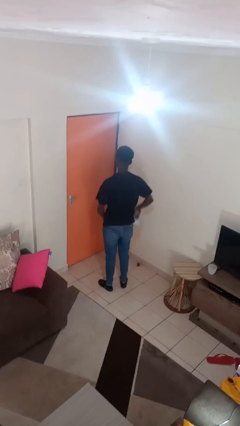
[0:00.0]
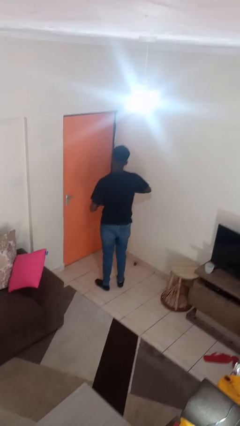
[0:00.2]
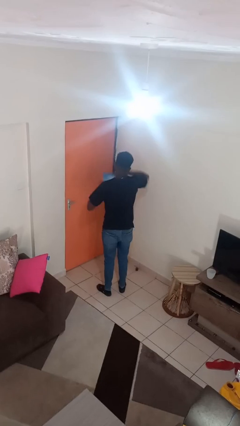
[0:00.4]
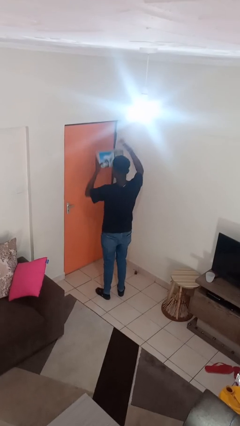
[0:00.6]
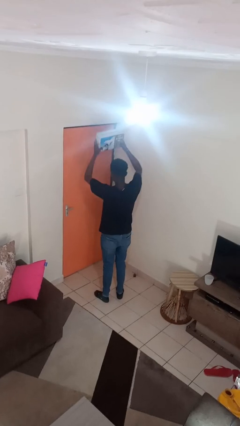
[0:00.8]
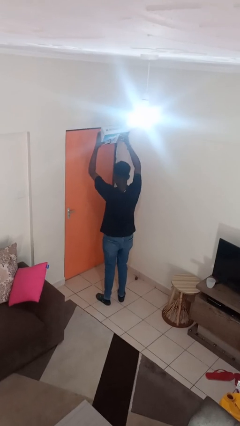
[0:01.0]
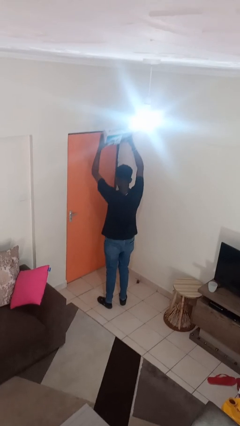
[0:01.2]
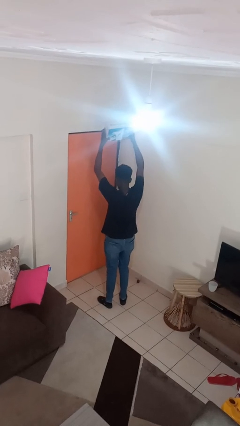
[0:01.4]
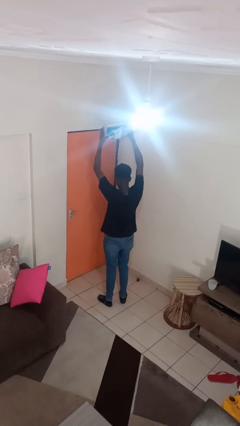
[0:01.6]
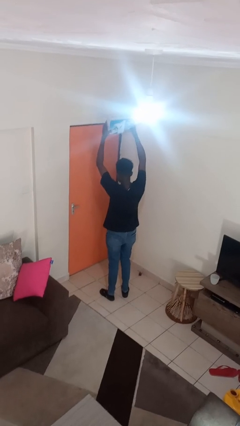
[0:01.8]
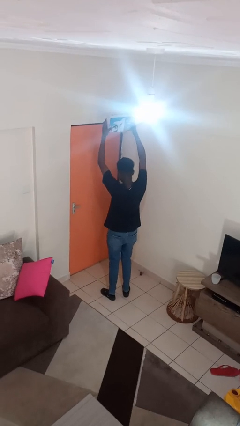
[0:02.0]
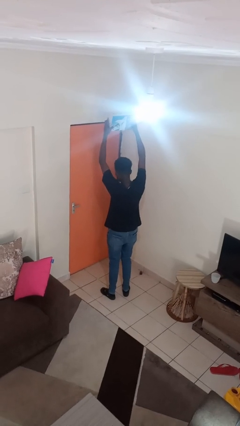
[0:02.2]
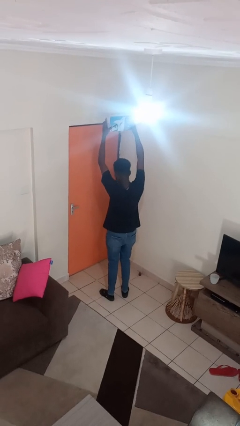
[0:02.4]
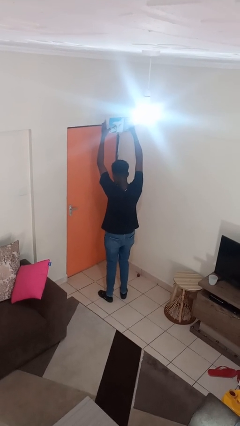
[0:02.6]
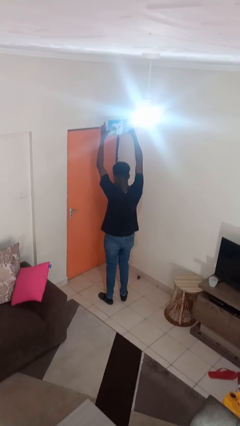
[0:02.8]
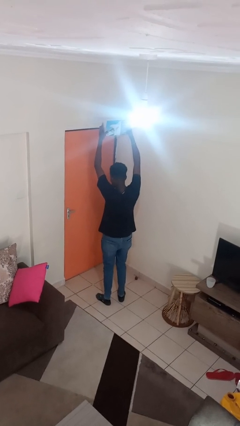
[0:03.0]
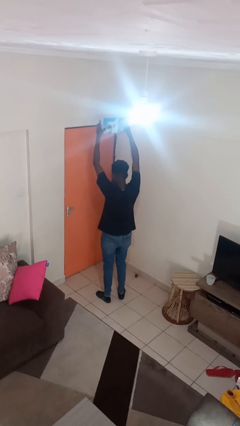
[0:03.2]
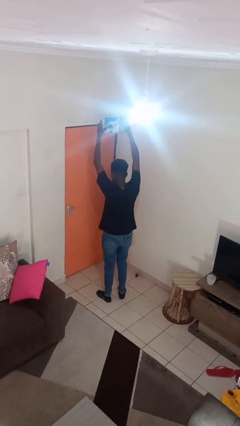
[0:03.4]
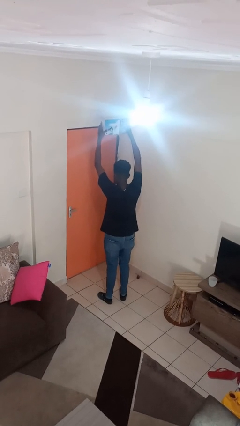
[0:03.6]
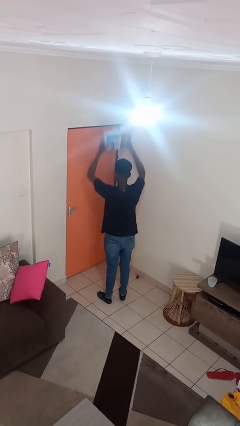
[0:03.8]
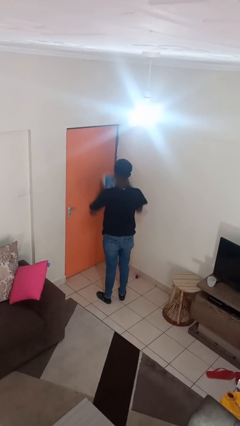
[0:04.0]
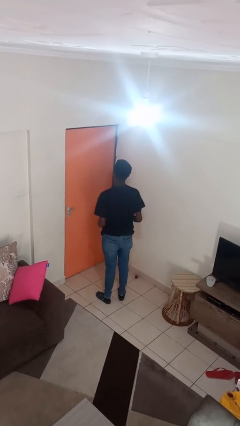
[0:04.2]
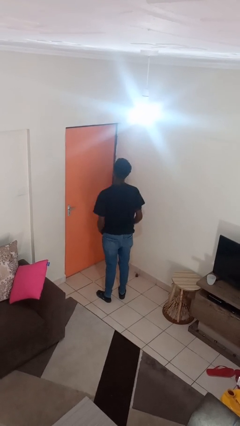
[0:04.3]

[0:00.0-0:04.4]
person holds object above head

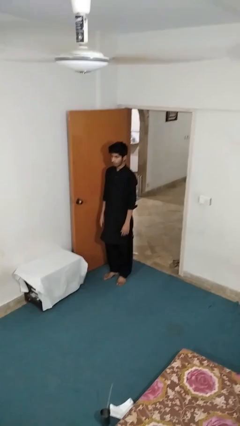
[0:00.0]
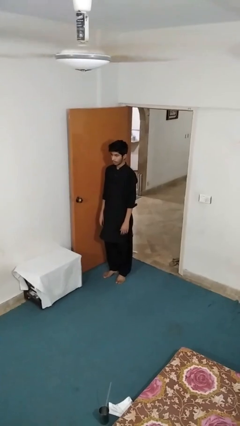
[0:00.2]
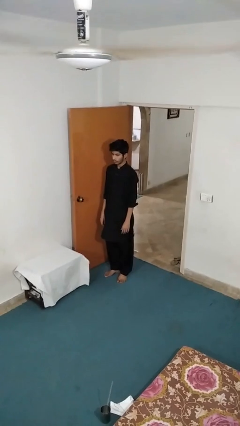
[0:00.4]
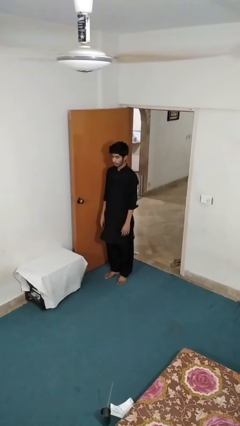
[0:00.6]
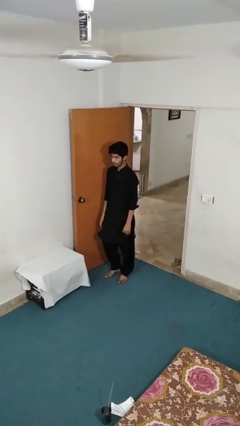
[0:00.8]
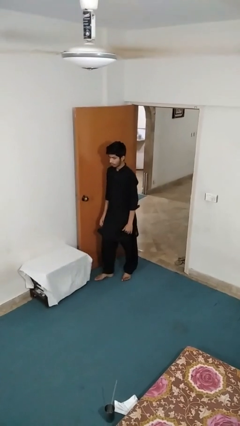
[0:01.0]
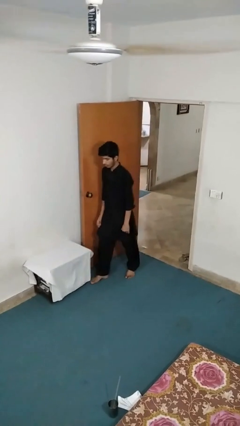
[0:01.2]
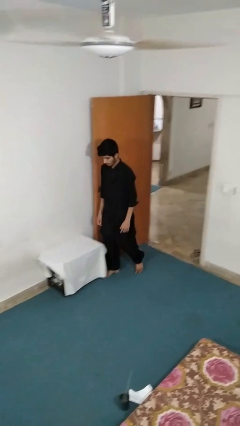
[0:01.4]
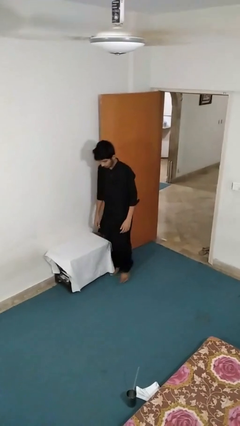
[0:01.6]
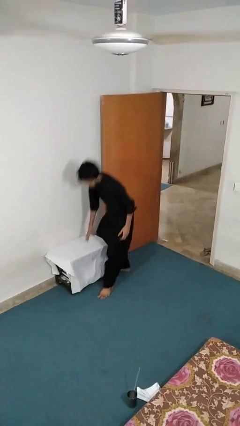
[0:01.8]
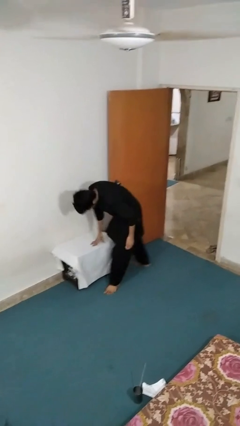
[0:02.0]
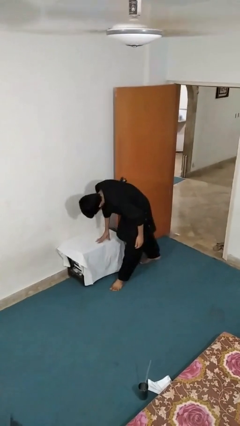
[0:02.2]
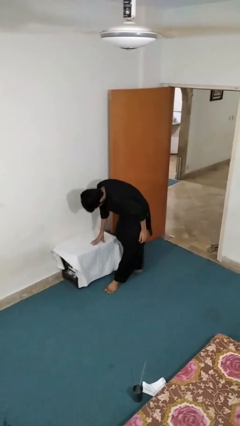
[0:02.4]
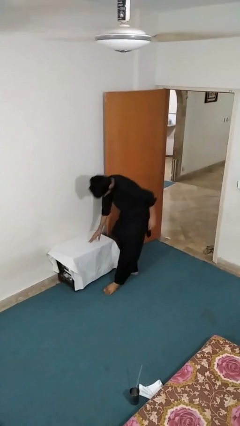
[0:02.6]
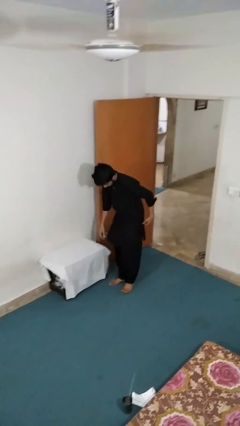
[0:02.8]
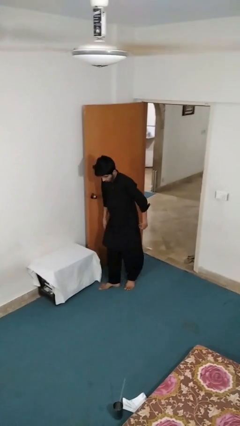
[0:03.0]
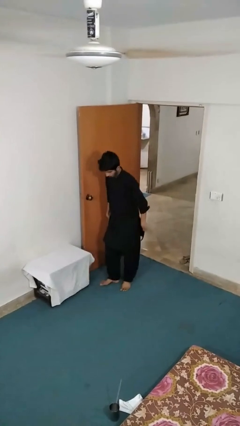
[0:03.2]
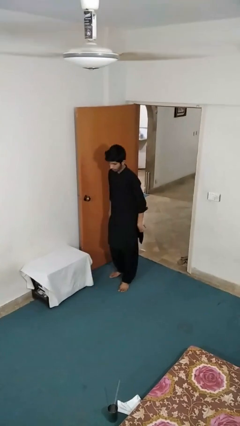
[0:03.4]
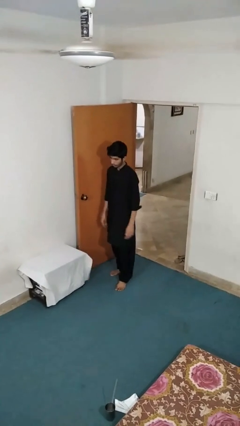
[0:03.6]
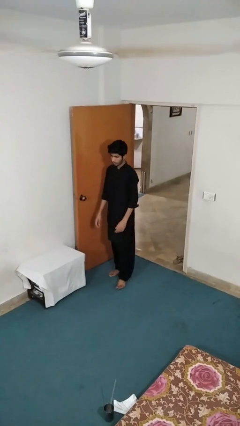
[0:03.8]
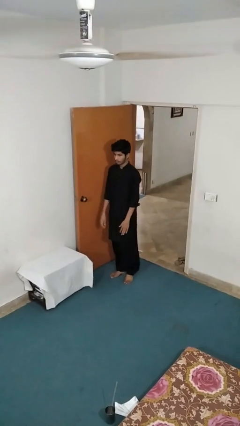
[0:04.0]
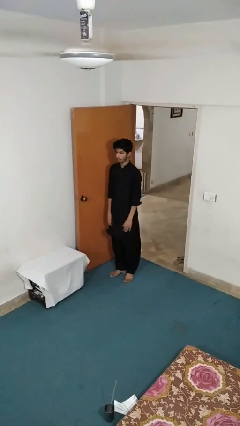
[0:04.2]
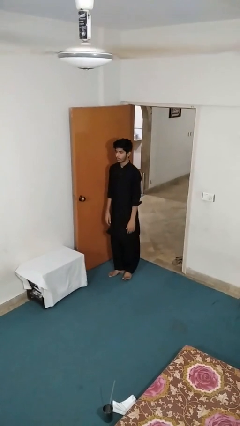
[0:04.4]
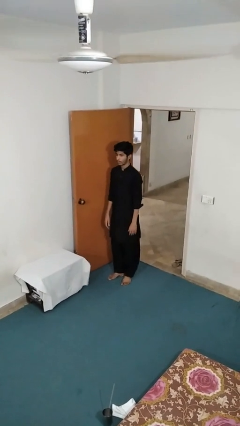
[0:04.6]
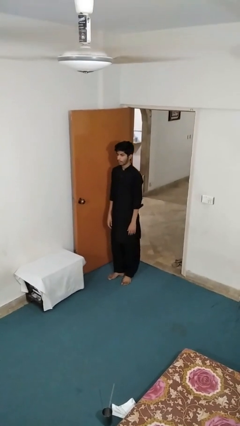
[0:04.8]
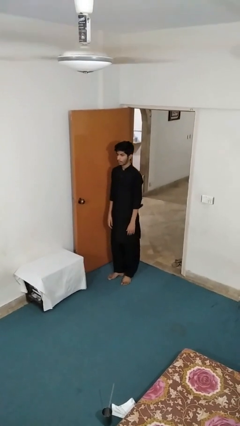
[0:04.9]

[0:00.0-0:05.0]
person bumps into table

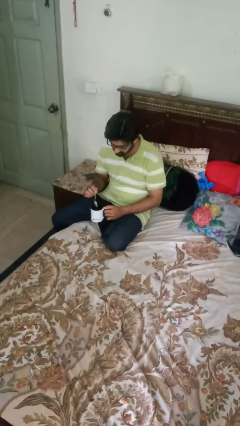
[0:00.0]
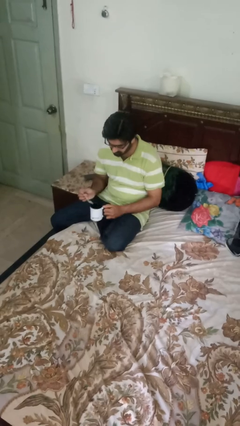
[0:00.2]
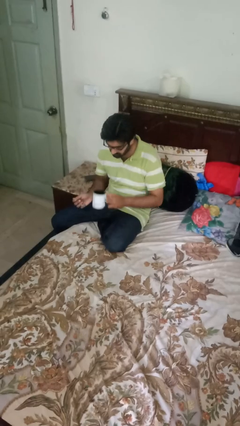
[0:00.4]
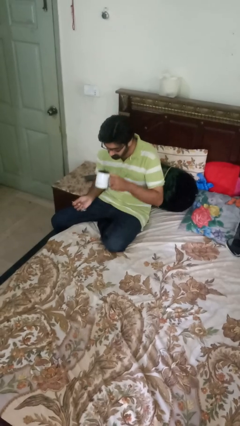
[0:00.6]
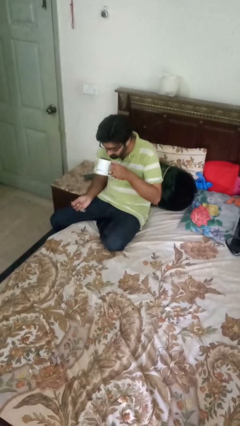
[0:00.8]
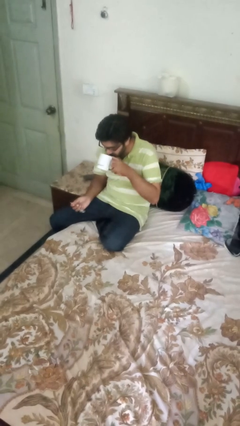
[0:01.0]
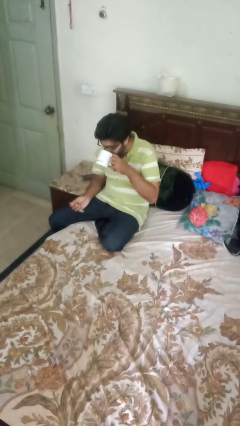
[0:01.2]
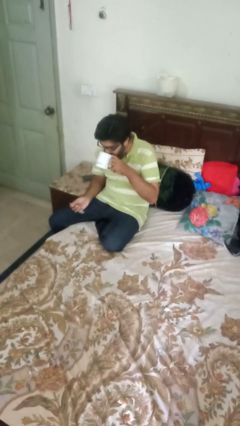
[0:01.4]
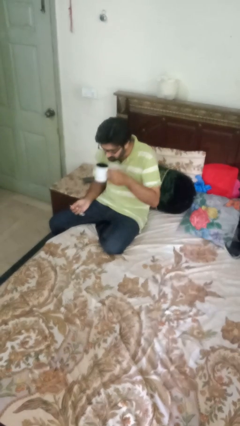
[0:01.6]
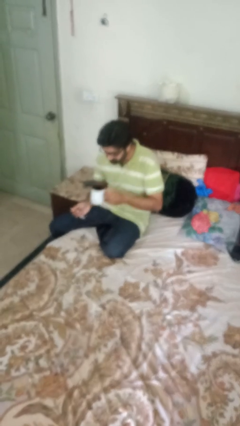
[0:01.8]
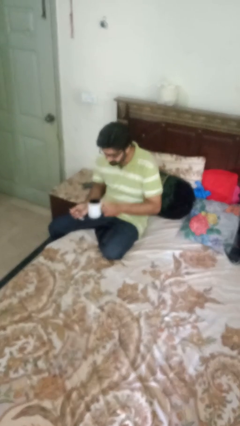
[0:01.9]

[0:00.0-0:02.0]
person drinks from mug

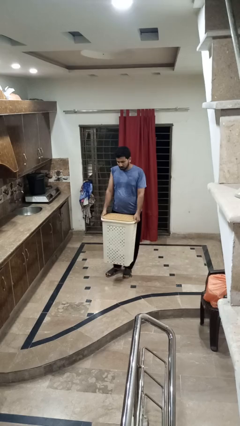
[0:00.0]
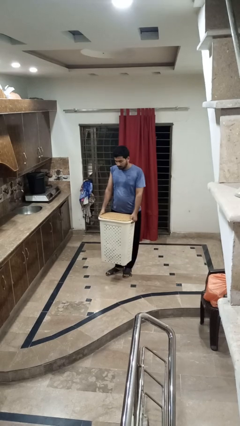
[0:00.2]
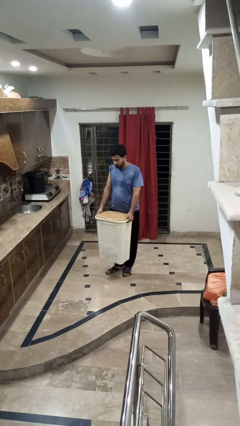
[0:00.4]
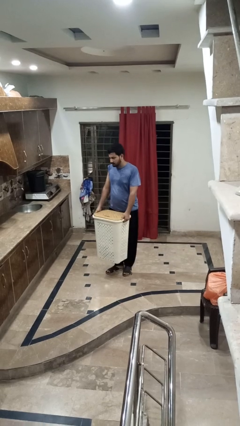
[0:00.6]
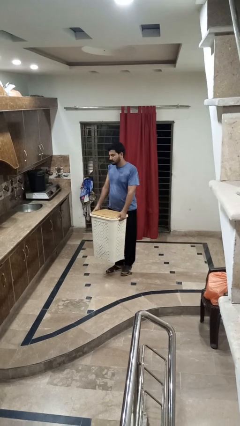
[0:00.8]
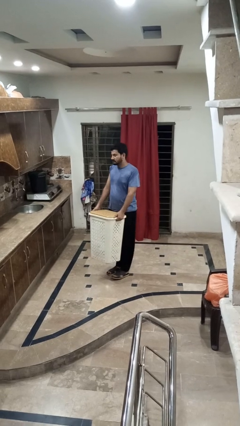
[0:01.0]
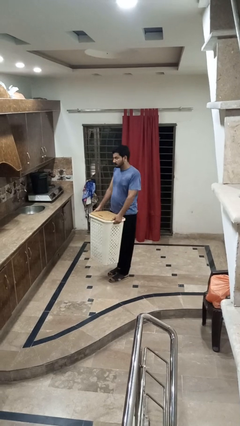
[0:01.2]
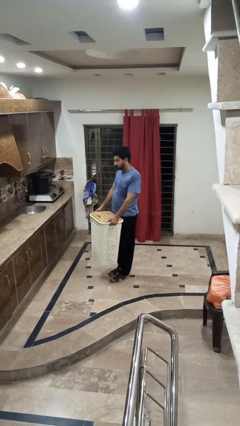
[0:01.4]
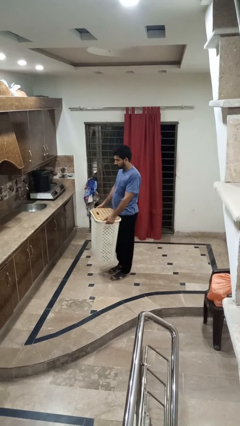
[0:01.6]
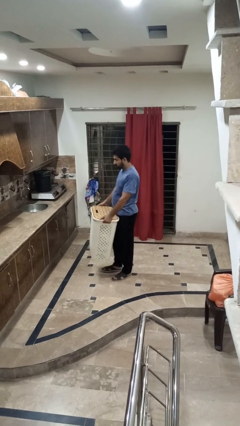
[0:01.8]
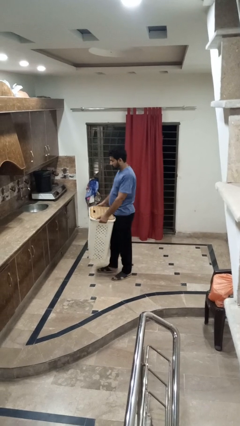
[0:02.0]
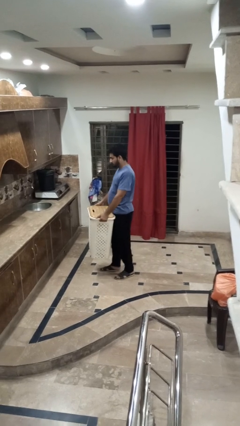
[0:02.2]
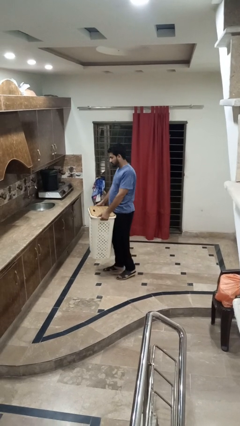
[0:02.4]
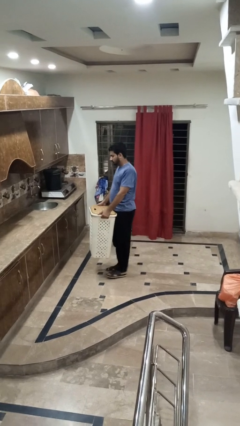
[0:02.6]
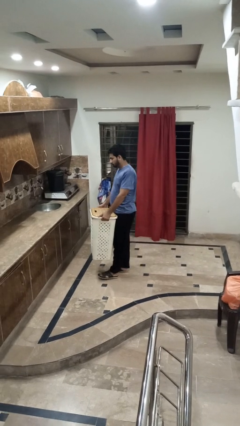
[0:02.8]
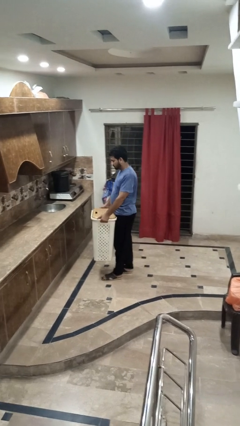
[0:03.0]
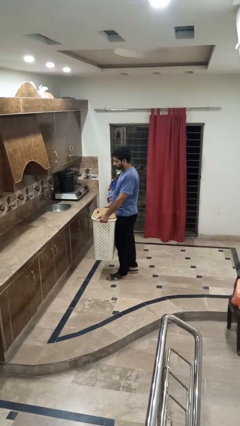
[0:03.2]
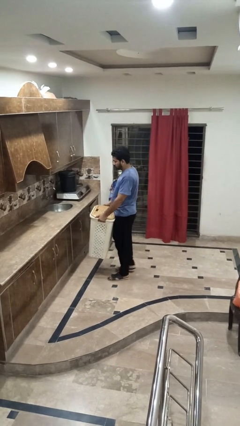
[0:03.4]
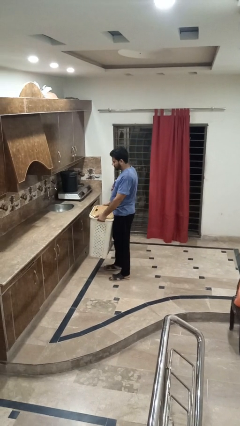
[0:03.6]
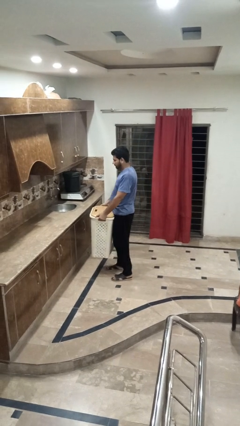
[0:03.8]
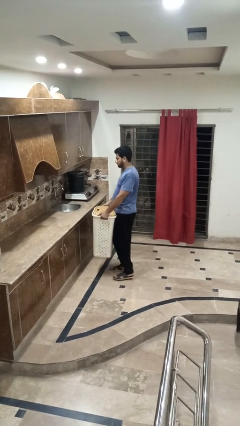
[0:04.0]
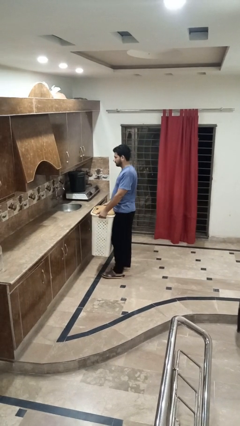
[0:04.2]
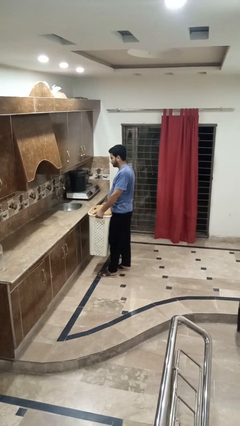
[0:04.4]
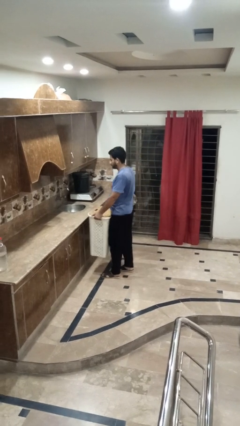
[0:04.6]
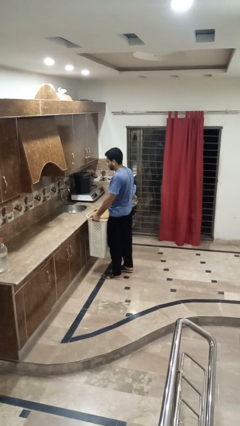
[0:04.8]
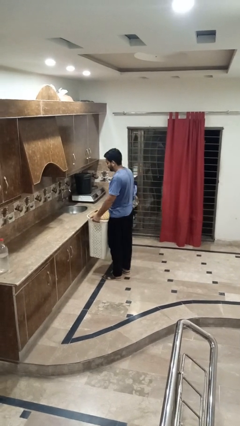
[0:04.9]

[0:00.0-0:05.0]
person carries laundry basket

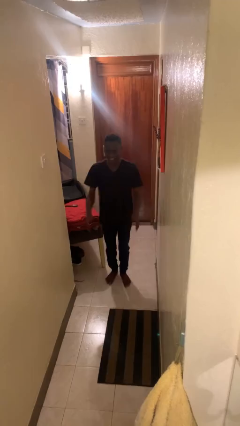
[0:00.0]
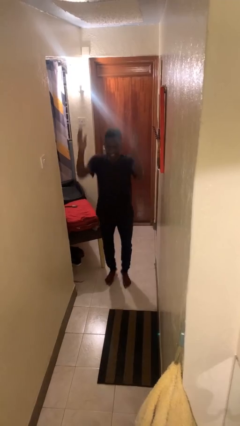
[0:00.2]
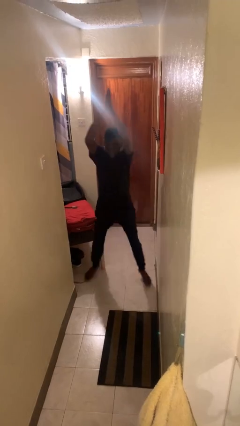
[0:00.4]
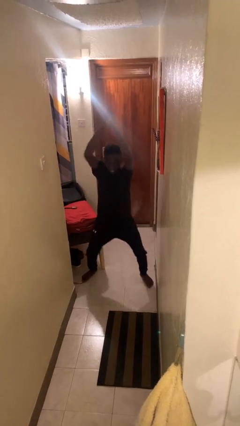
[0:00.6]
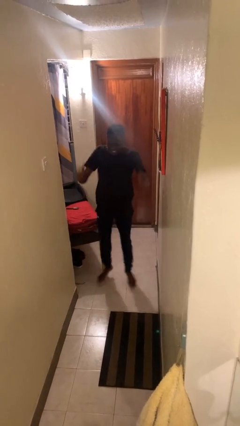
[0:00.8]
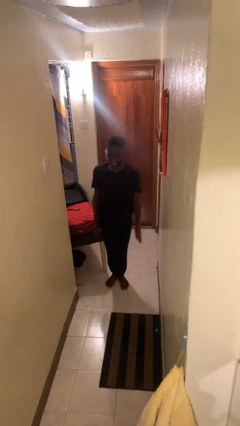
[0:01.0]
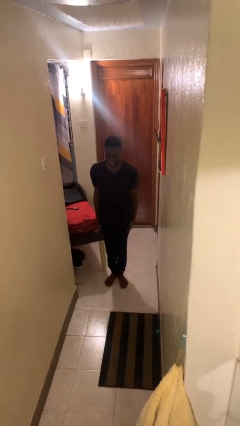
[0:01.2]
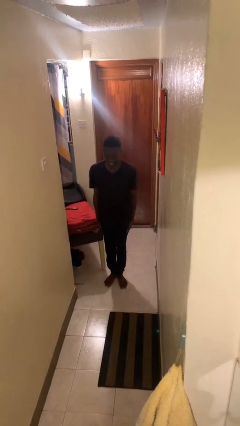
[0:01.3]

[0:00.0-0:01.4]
person exercises with jumping jacks

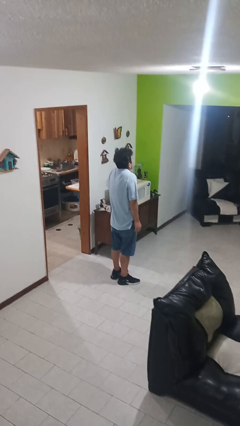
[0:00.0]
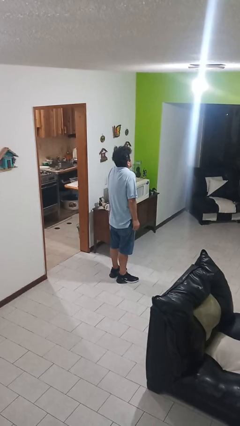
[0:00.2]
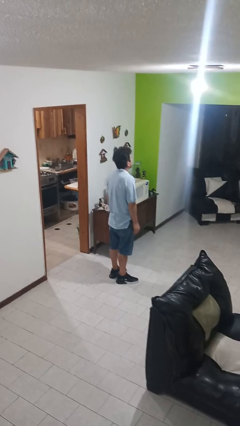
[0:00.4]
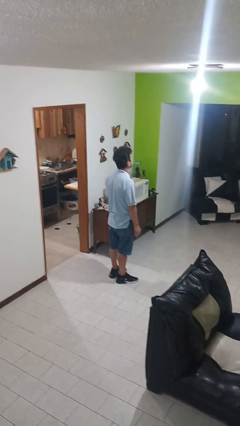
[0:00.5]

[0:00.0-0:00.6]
person shrugs
